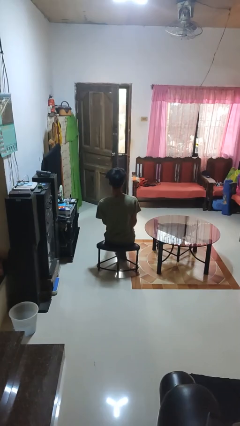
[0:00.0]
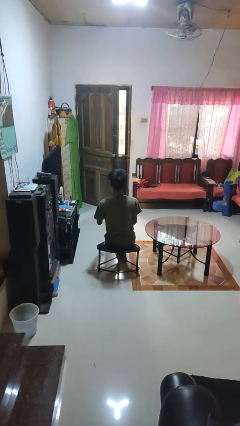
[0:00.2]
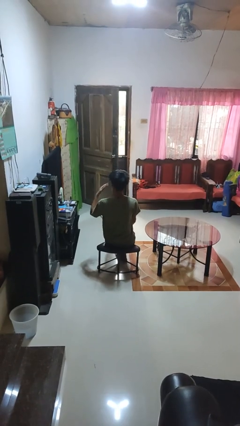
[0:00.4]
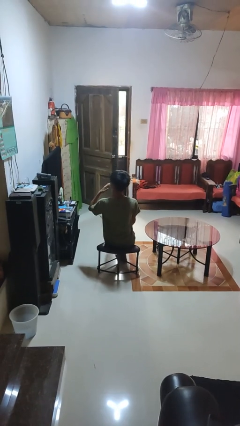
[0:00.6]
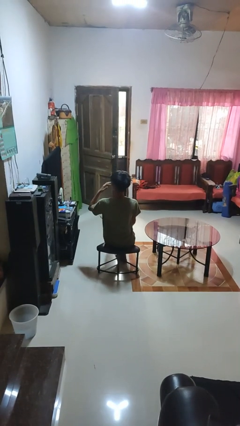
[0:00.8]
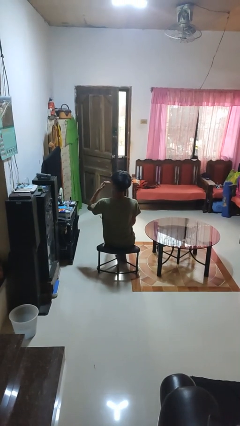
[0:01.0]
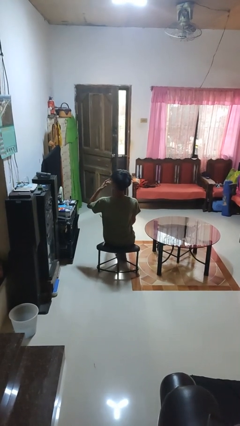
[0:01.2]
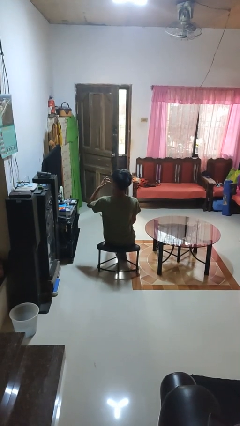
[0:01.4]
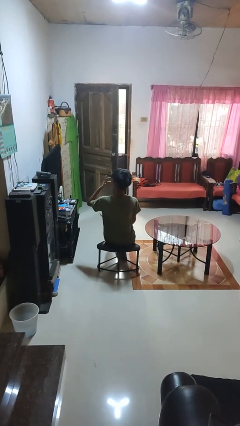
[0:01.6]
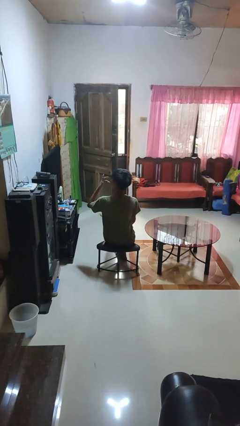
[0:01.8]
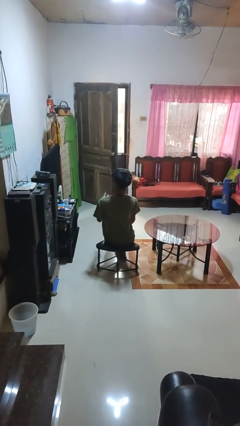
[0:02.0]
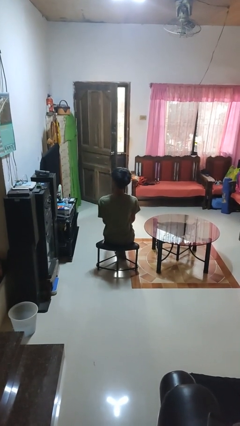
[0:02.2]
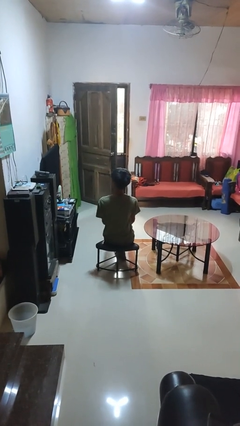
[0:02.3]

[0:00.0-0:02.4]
person licks fingers

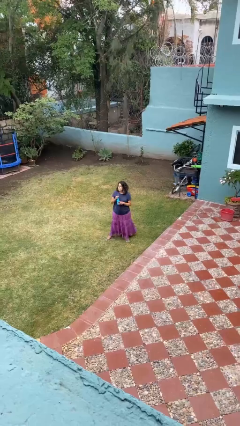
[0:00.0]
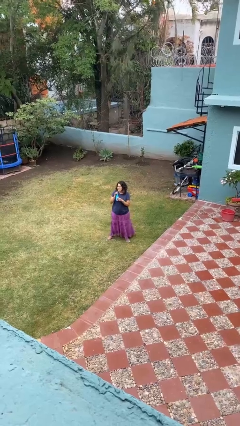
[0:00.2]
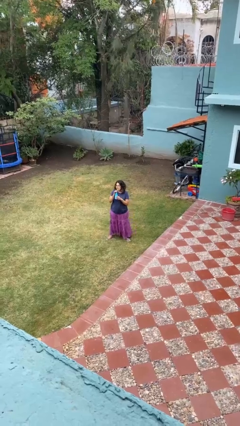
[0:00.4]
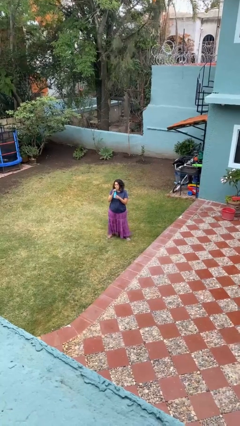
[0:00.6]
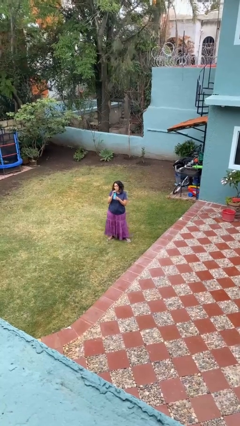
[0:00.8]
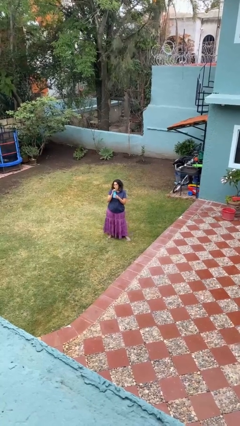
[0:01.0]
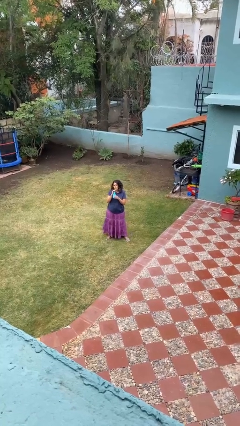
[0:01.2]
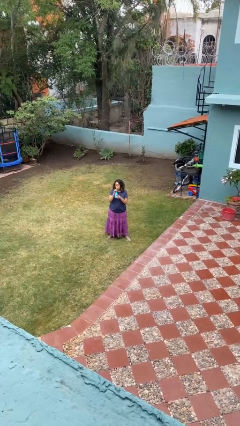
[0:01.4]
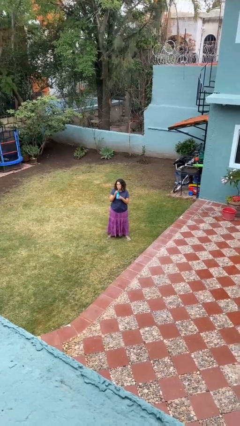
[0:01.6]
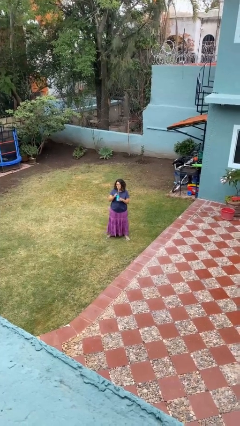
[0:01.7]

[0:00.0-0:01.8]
person drinks from straw

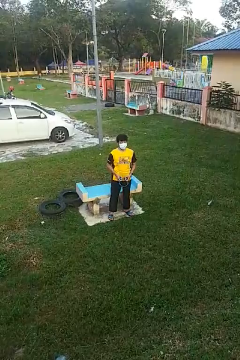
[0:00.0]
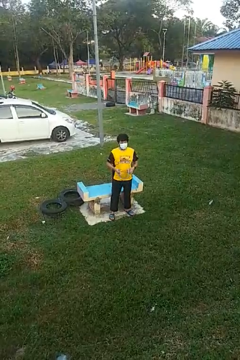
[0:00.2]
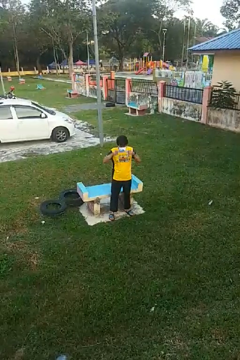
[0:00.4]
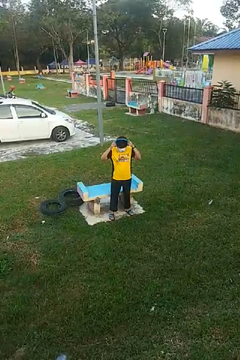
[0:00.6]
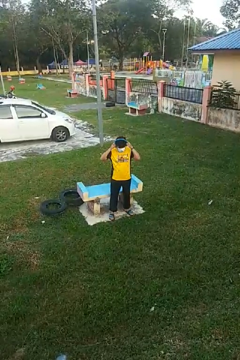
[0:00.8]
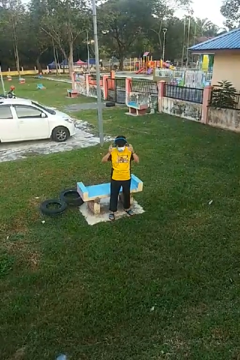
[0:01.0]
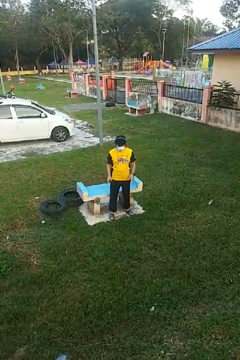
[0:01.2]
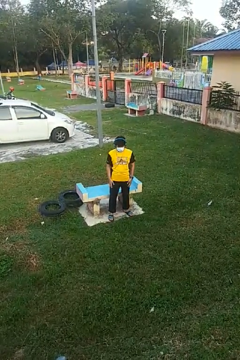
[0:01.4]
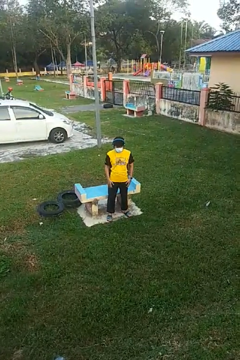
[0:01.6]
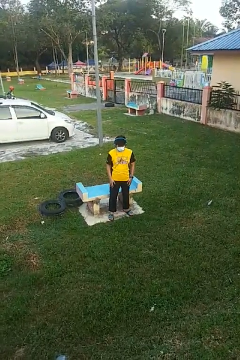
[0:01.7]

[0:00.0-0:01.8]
person puts on headphones

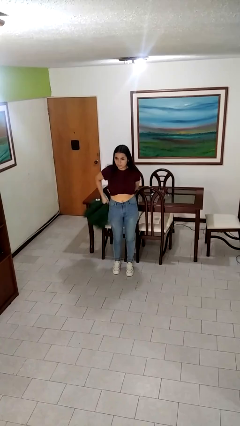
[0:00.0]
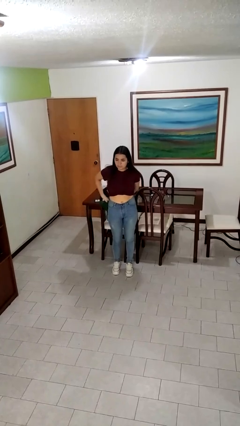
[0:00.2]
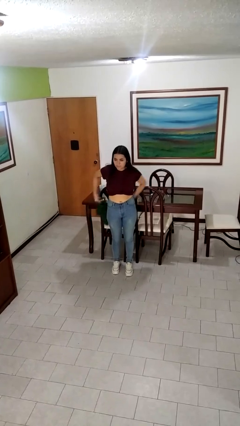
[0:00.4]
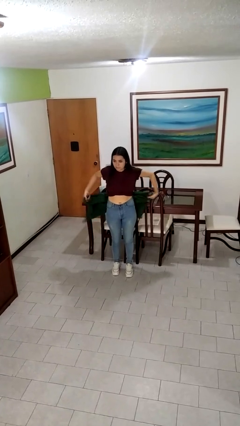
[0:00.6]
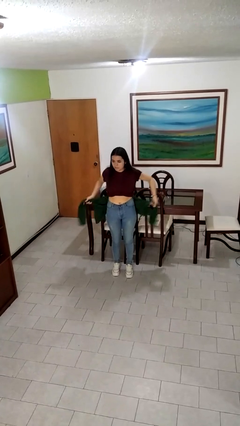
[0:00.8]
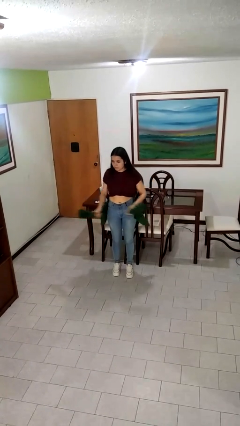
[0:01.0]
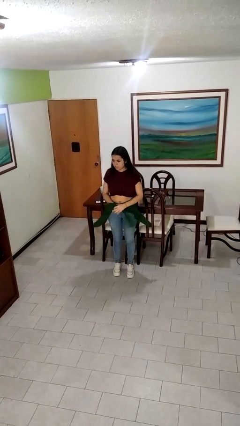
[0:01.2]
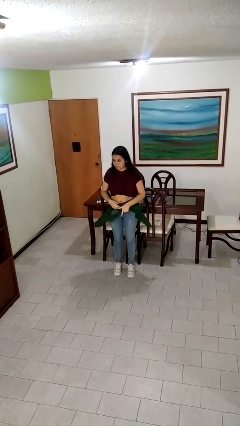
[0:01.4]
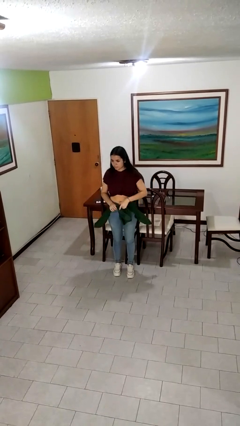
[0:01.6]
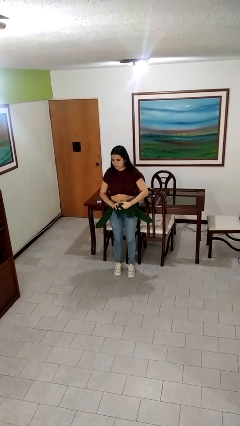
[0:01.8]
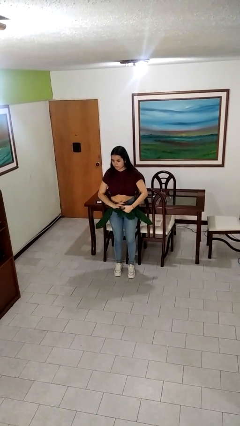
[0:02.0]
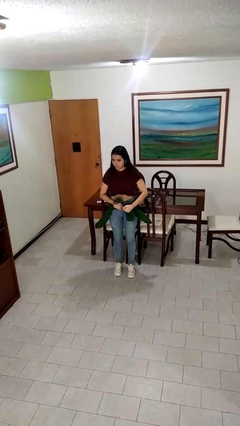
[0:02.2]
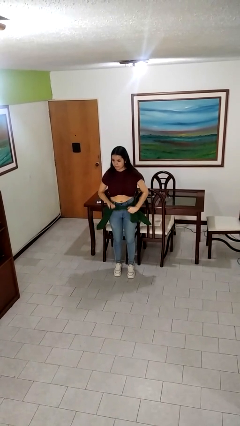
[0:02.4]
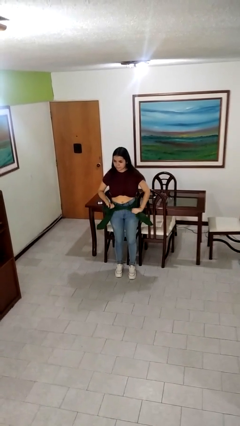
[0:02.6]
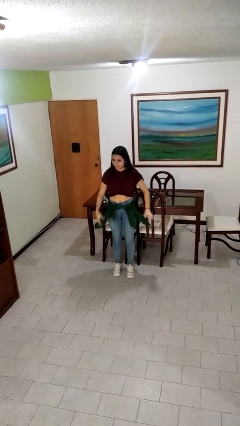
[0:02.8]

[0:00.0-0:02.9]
person ties jacket around waist

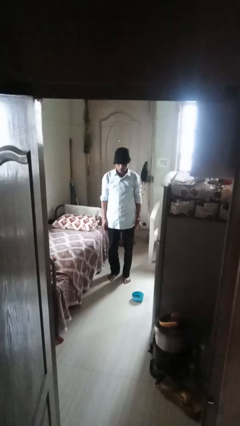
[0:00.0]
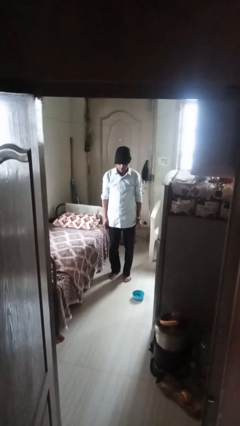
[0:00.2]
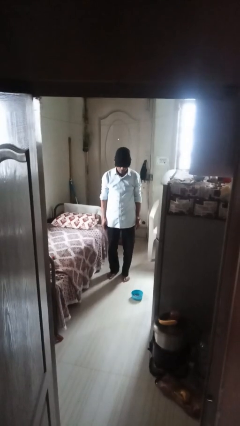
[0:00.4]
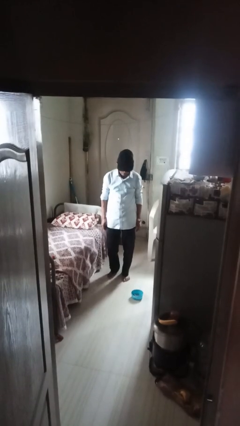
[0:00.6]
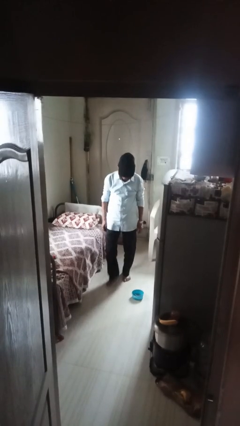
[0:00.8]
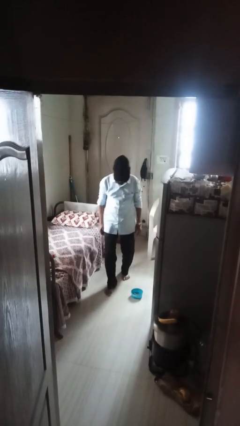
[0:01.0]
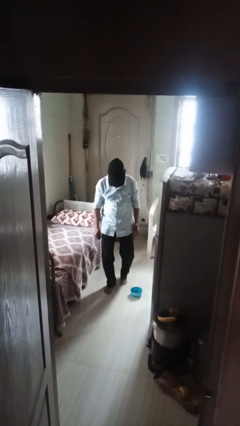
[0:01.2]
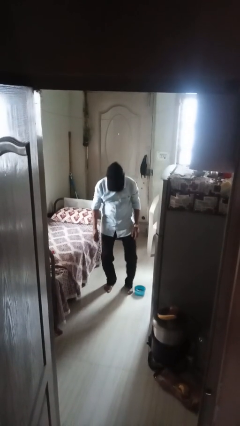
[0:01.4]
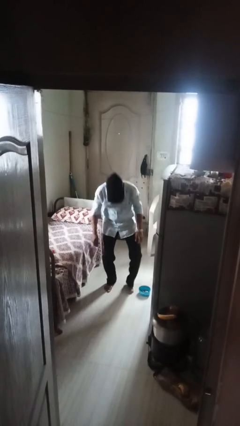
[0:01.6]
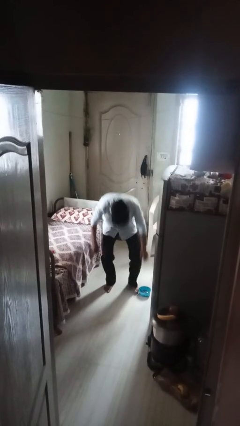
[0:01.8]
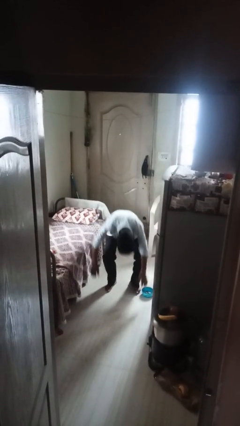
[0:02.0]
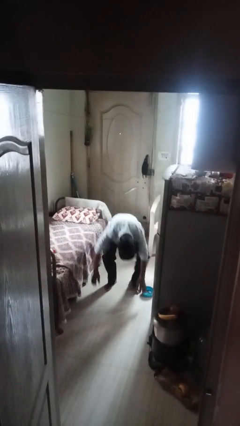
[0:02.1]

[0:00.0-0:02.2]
person trips on object on floor

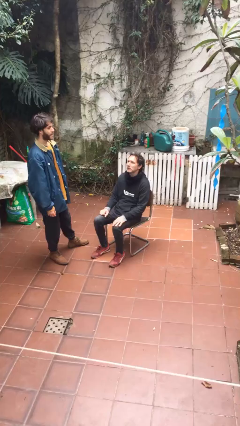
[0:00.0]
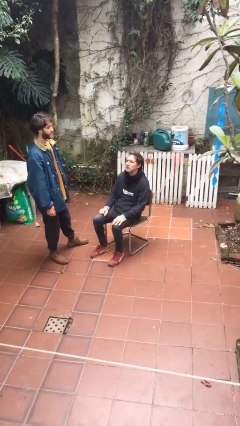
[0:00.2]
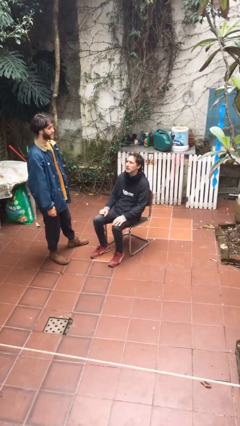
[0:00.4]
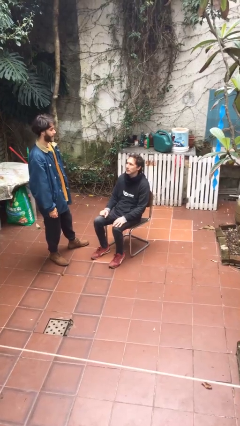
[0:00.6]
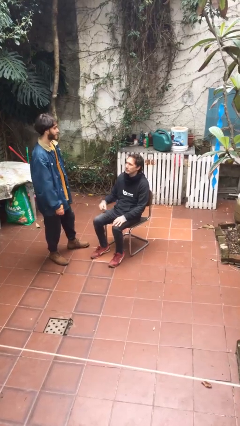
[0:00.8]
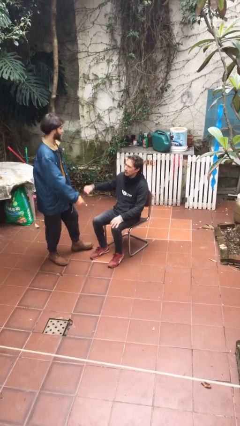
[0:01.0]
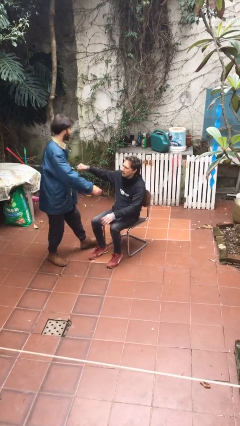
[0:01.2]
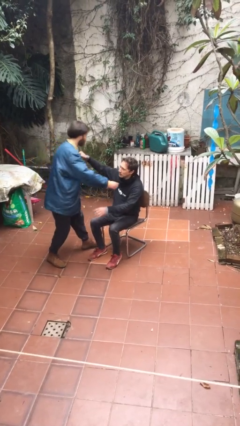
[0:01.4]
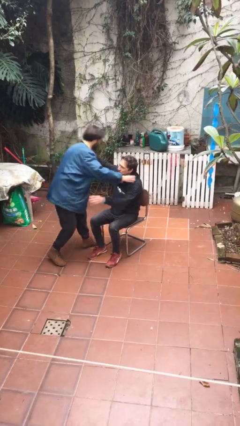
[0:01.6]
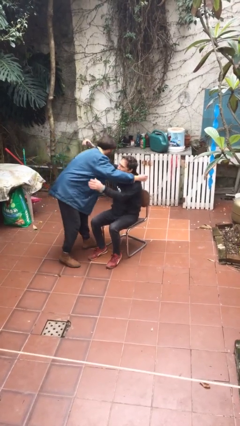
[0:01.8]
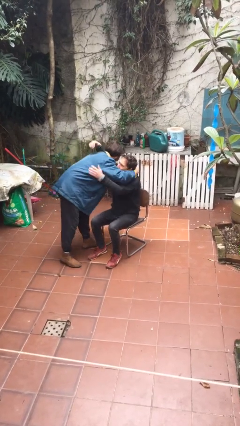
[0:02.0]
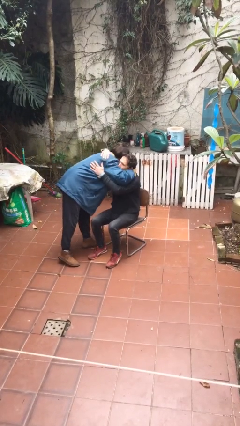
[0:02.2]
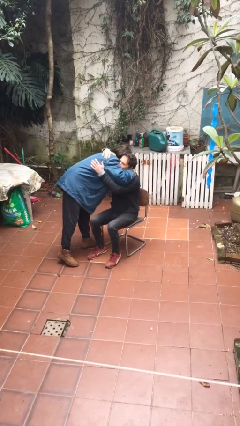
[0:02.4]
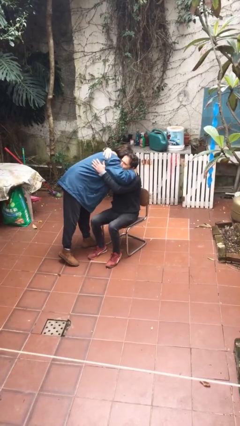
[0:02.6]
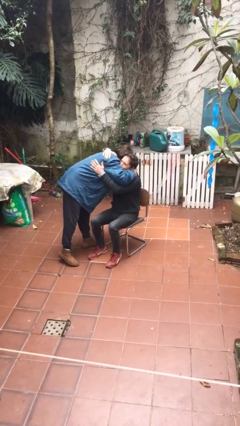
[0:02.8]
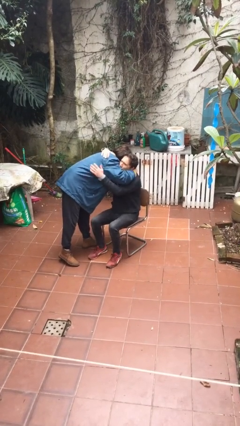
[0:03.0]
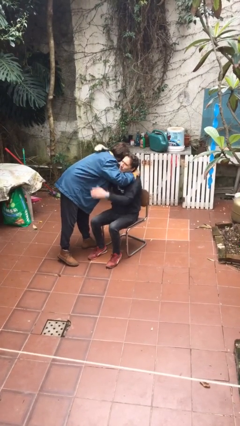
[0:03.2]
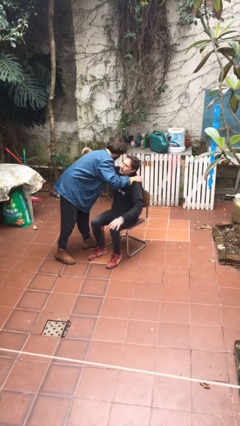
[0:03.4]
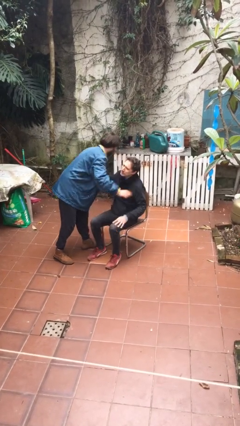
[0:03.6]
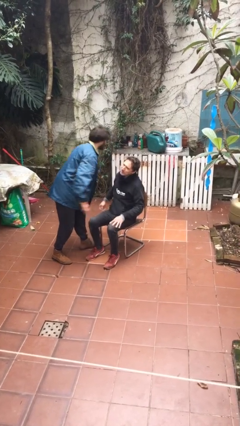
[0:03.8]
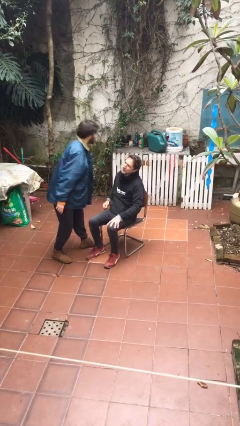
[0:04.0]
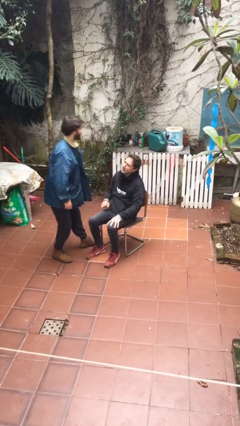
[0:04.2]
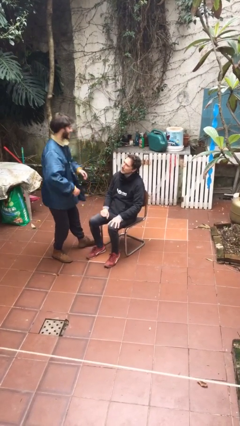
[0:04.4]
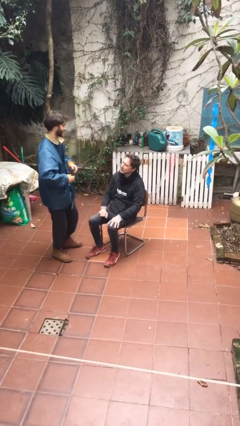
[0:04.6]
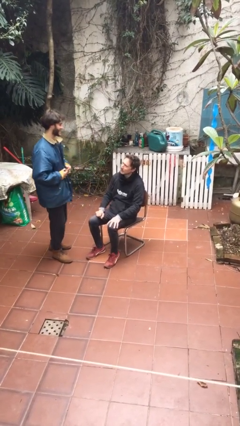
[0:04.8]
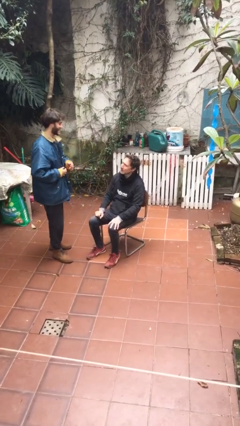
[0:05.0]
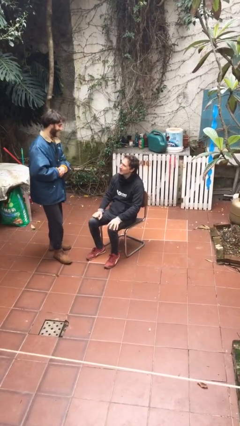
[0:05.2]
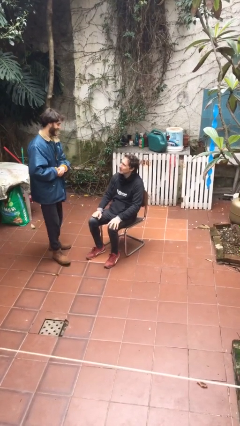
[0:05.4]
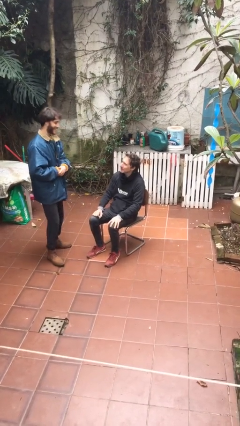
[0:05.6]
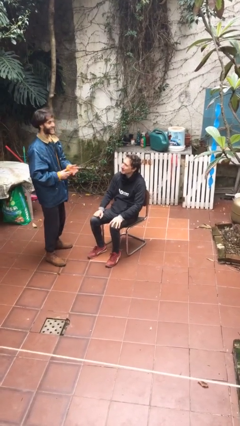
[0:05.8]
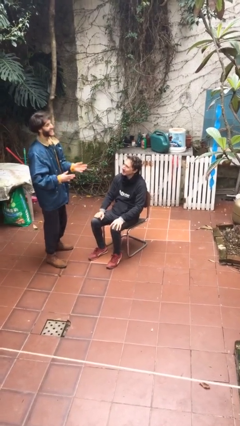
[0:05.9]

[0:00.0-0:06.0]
person embraces person

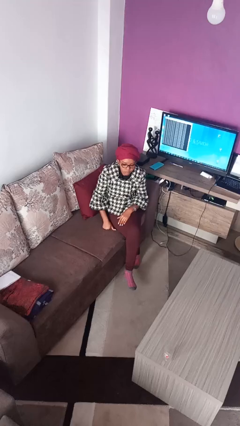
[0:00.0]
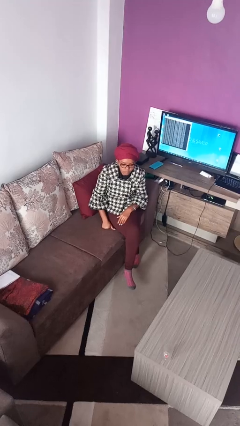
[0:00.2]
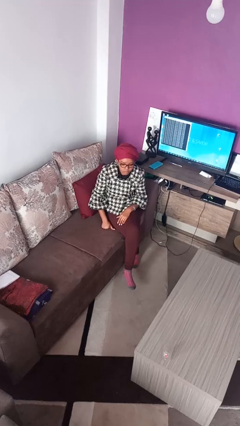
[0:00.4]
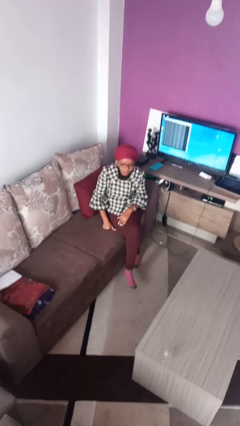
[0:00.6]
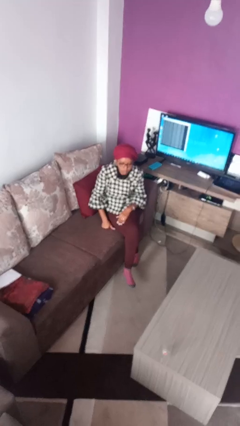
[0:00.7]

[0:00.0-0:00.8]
person cracks knuckles

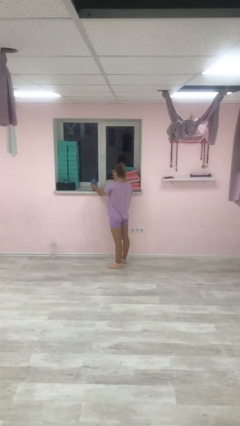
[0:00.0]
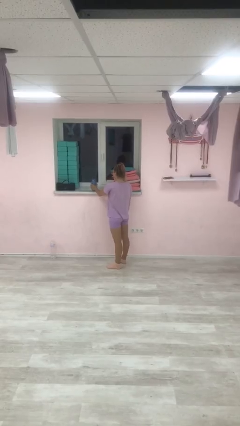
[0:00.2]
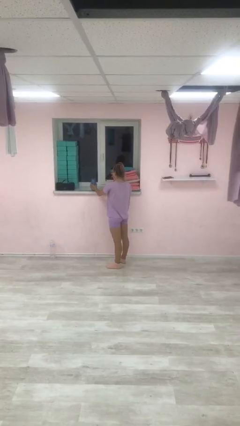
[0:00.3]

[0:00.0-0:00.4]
person puts down object on countertop
